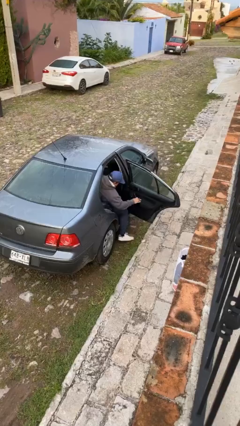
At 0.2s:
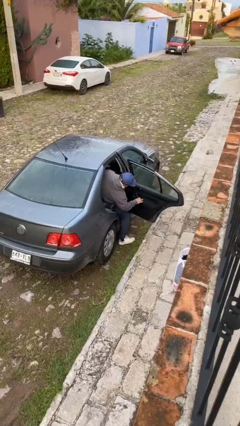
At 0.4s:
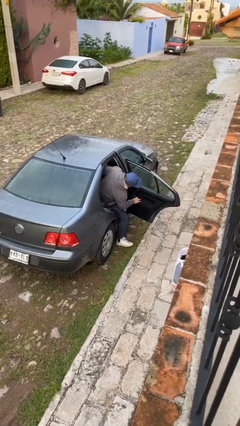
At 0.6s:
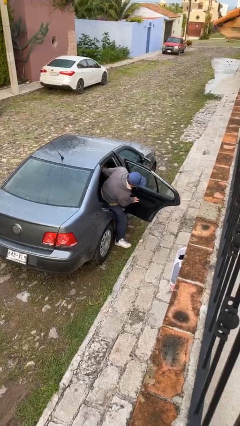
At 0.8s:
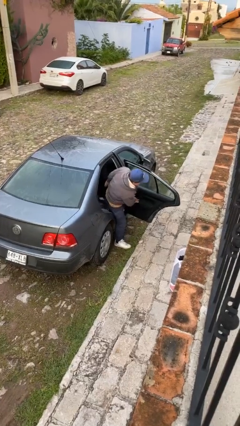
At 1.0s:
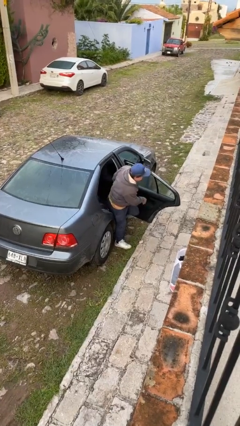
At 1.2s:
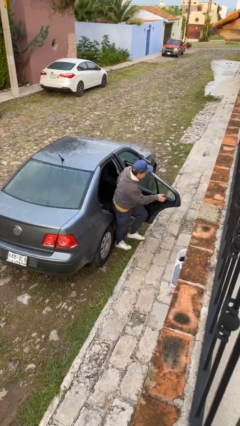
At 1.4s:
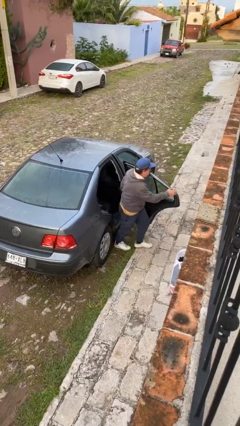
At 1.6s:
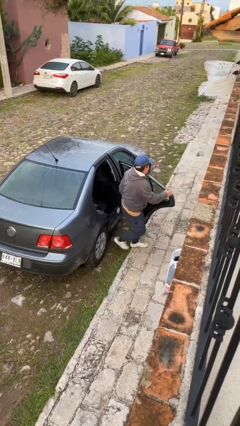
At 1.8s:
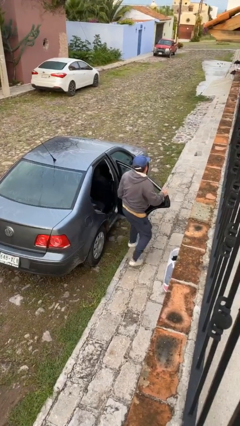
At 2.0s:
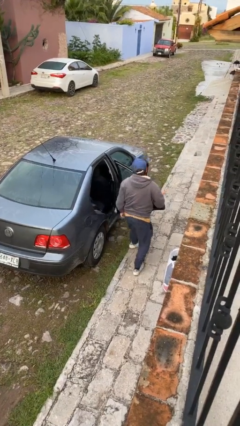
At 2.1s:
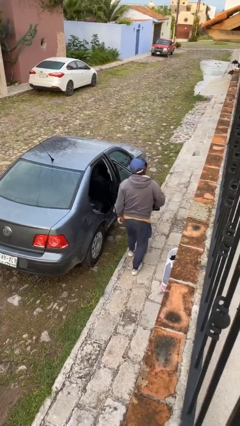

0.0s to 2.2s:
person exits car

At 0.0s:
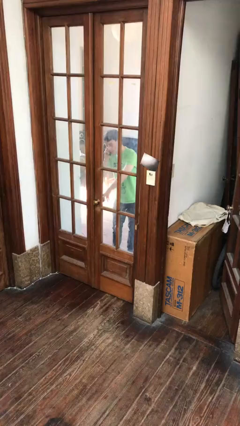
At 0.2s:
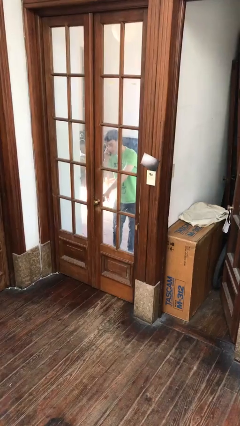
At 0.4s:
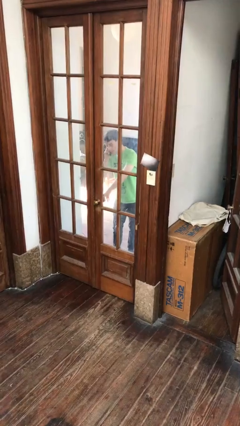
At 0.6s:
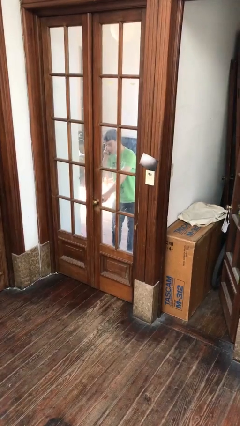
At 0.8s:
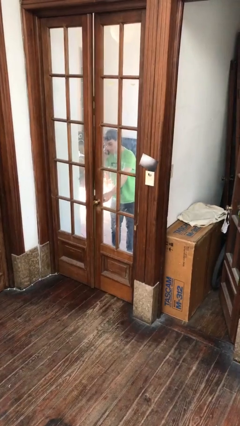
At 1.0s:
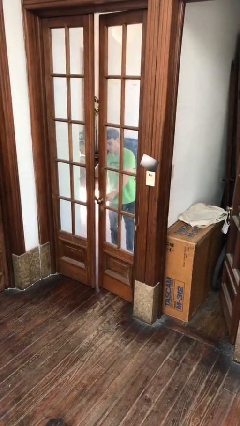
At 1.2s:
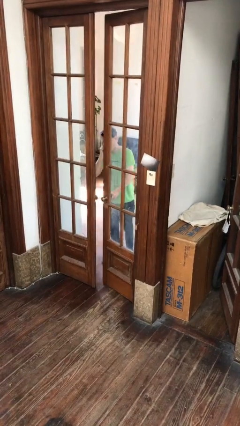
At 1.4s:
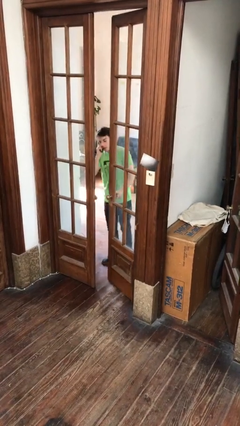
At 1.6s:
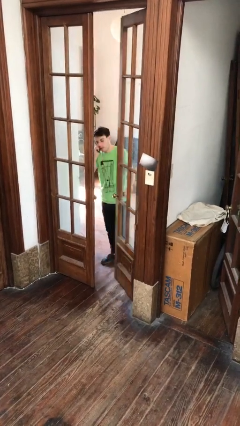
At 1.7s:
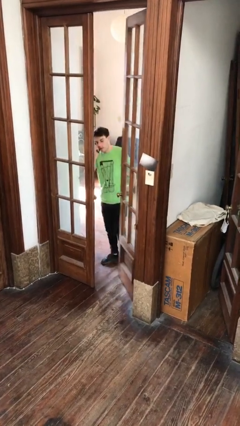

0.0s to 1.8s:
person opens facility door

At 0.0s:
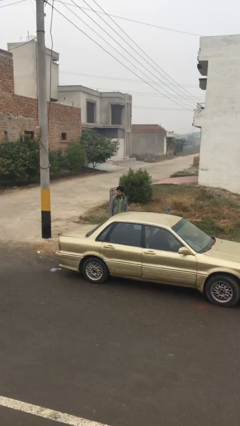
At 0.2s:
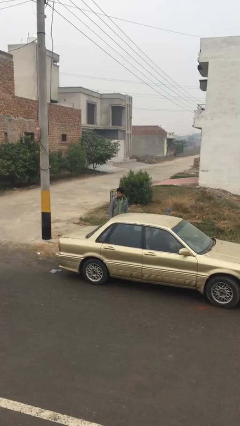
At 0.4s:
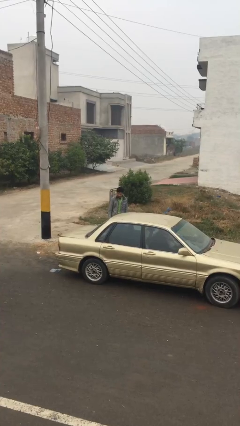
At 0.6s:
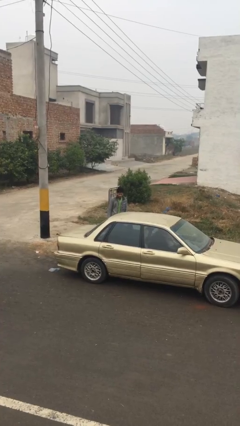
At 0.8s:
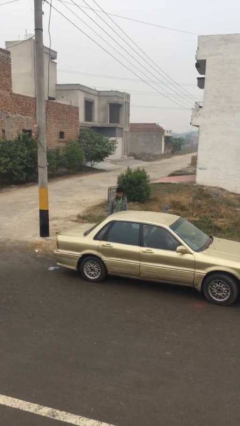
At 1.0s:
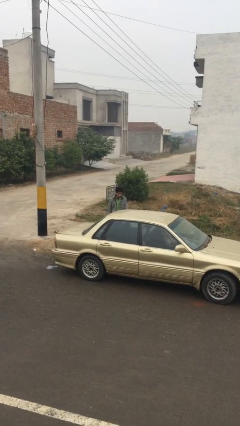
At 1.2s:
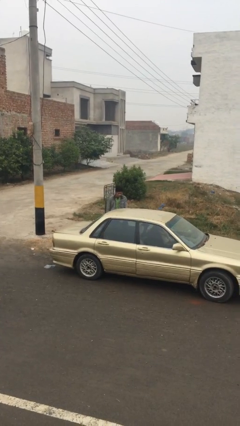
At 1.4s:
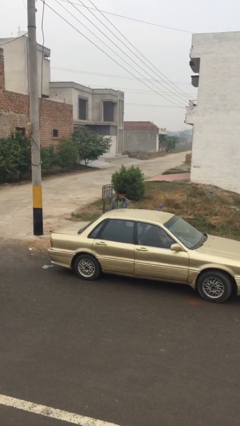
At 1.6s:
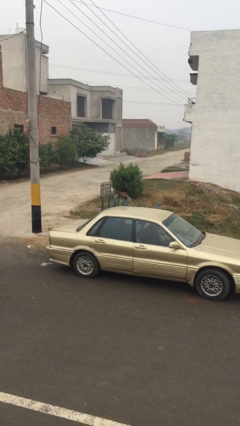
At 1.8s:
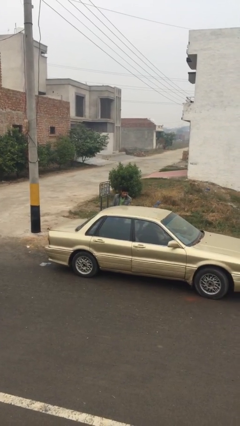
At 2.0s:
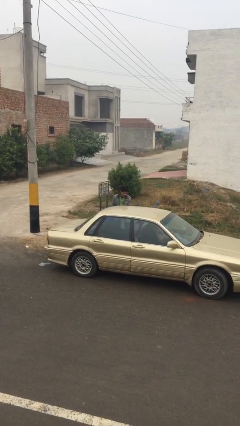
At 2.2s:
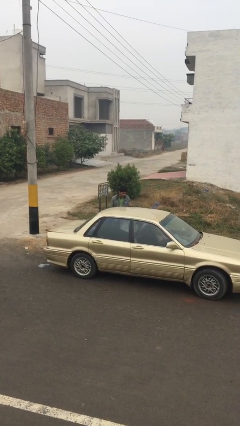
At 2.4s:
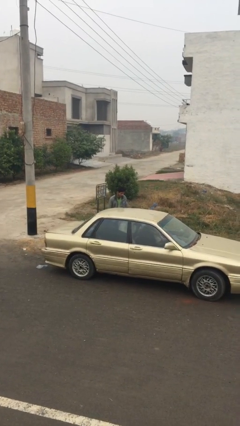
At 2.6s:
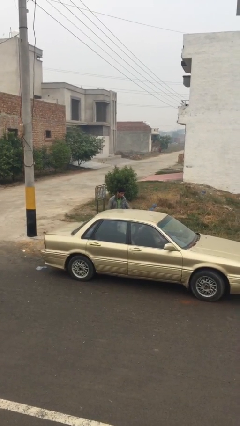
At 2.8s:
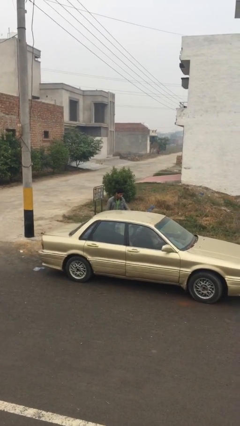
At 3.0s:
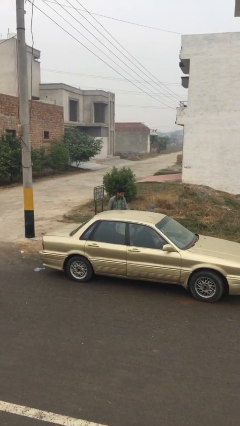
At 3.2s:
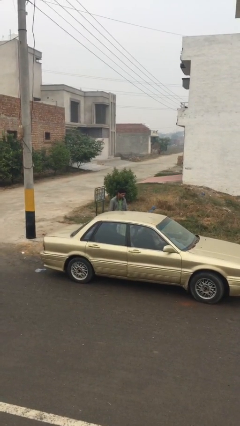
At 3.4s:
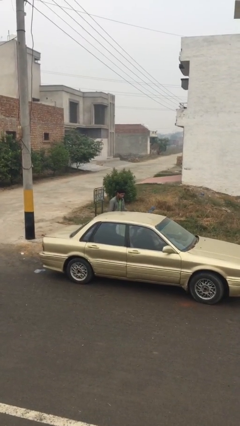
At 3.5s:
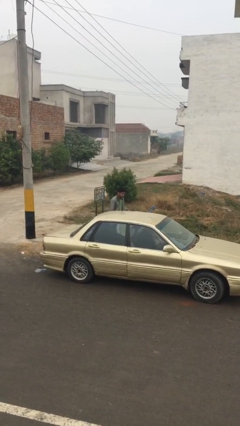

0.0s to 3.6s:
person opens car door

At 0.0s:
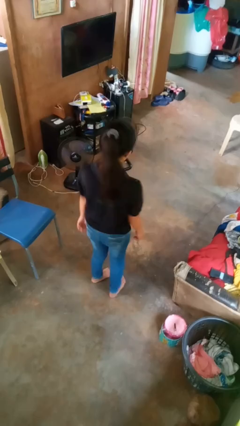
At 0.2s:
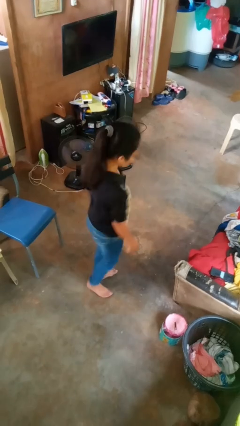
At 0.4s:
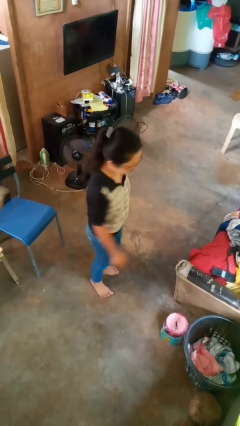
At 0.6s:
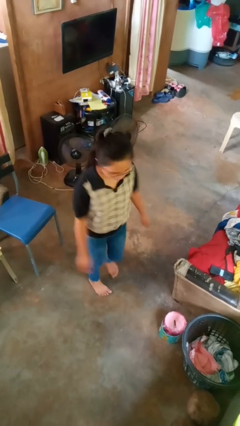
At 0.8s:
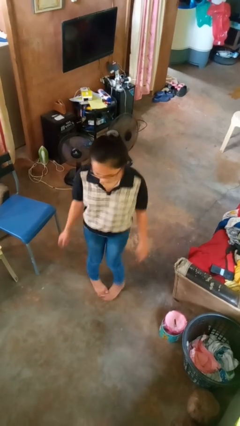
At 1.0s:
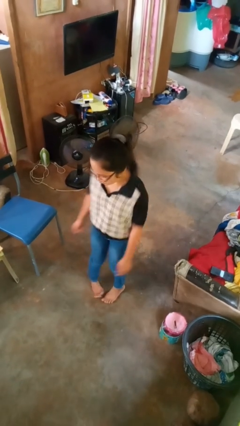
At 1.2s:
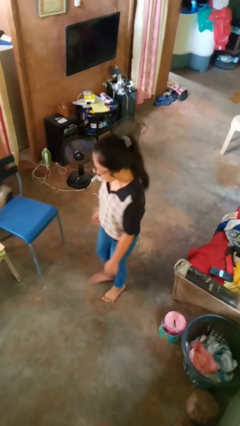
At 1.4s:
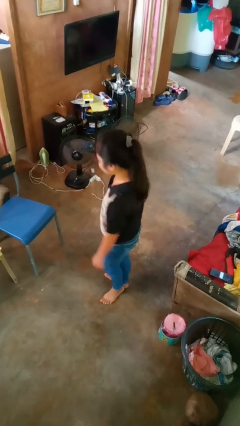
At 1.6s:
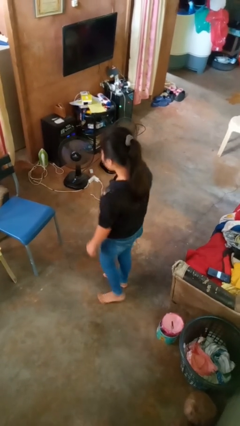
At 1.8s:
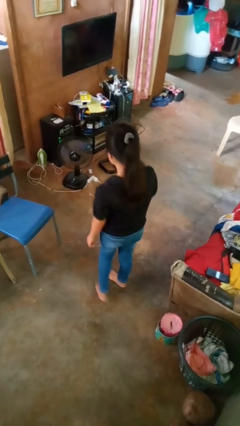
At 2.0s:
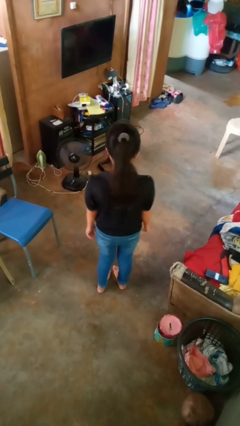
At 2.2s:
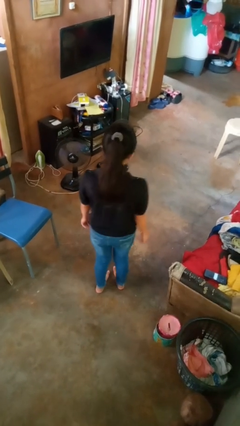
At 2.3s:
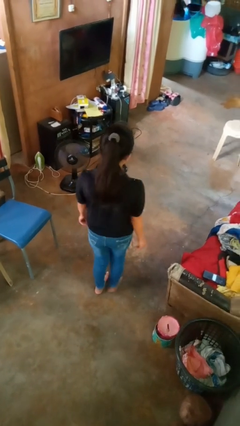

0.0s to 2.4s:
person twirls

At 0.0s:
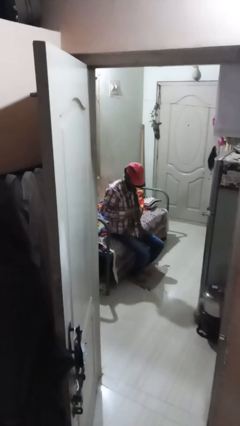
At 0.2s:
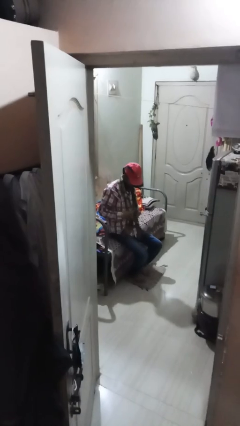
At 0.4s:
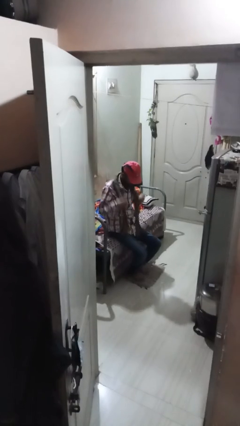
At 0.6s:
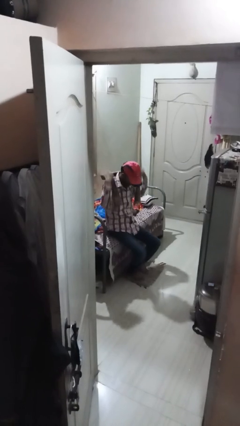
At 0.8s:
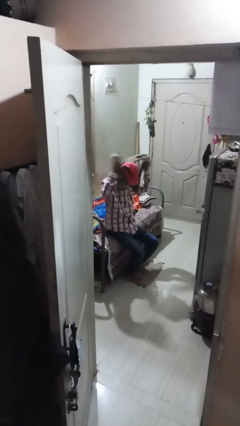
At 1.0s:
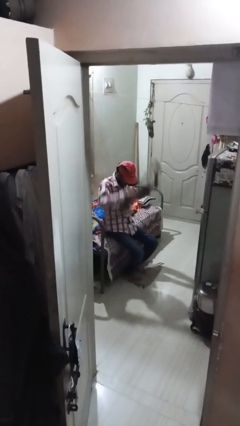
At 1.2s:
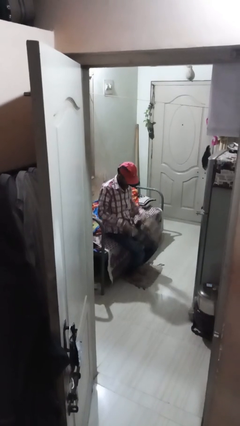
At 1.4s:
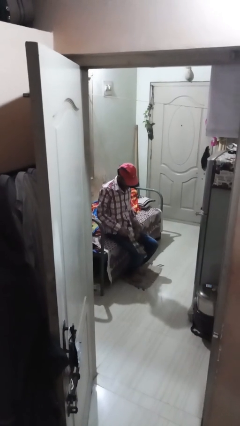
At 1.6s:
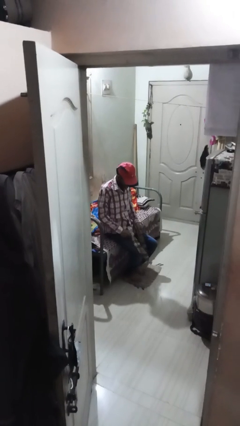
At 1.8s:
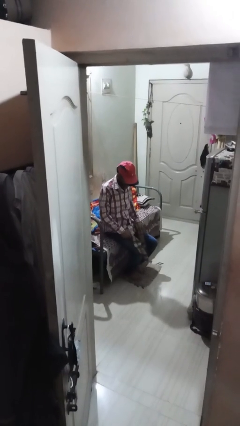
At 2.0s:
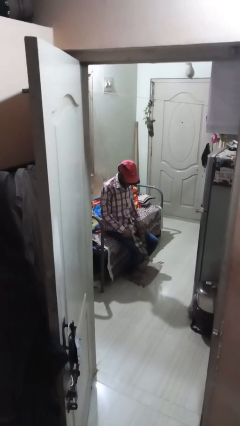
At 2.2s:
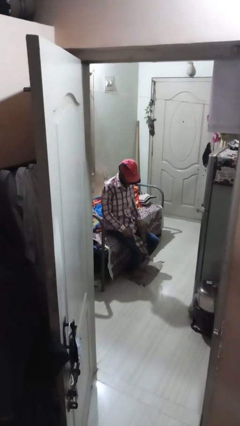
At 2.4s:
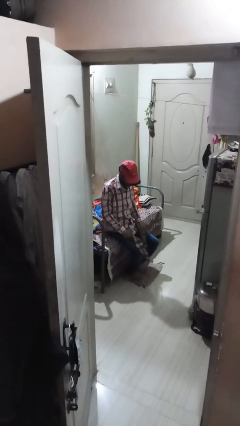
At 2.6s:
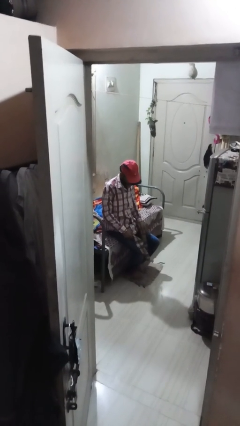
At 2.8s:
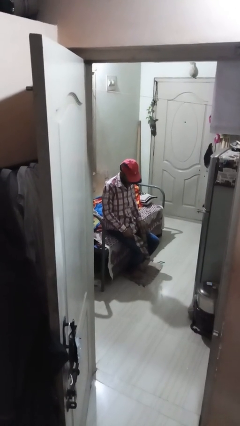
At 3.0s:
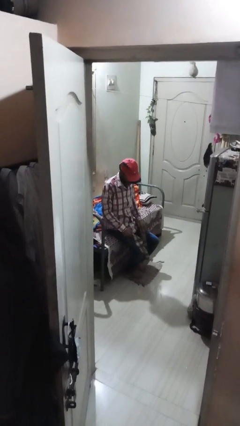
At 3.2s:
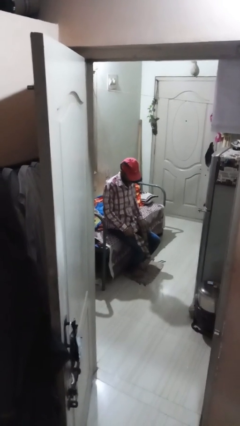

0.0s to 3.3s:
person takes off scarf

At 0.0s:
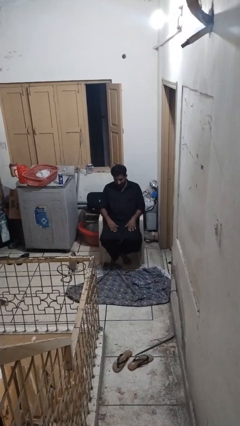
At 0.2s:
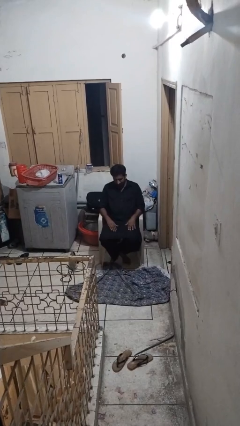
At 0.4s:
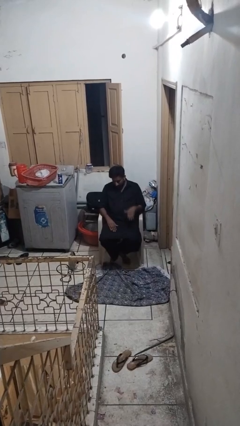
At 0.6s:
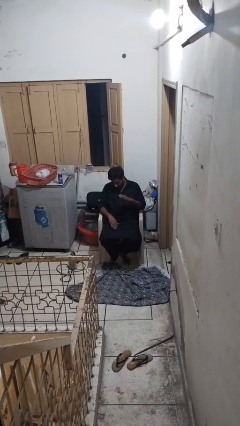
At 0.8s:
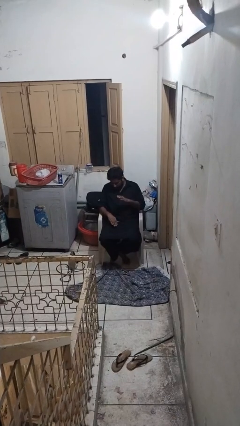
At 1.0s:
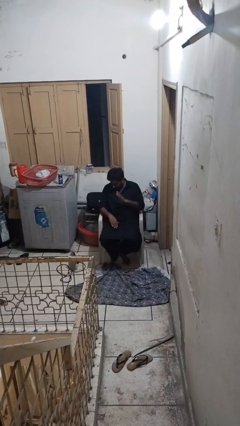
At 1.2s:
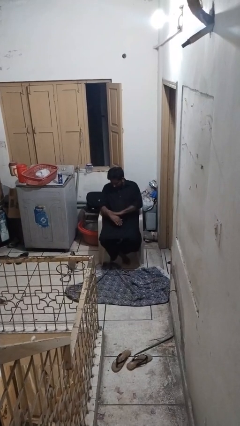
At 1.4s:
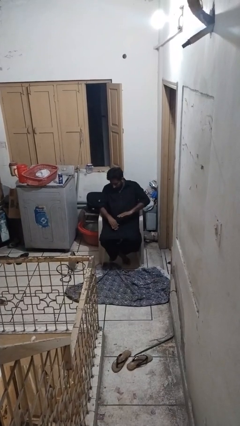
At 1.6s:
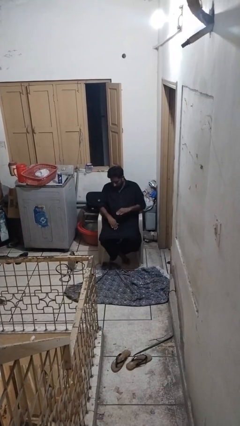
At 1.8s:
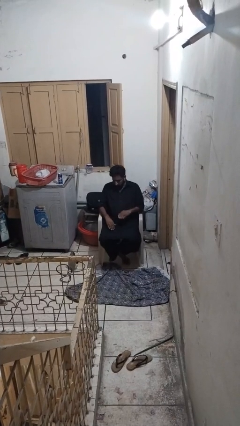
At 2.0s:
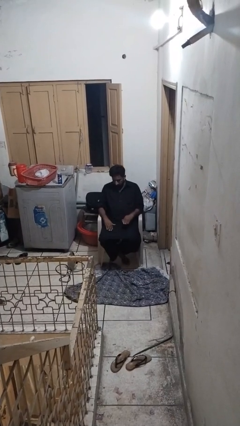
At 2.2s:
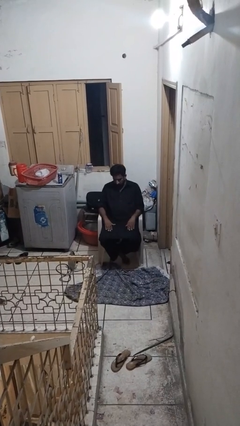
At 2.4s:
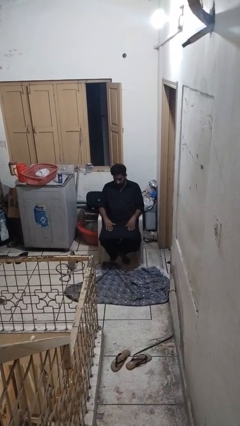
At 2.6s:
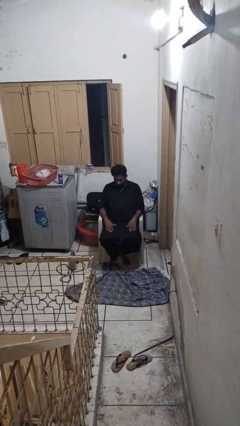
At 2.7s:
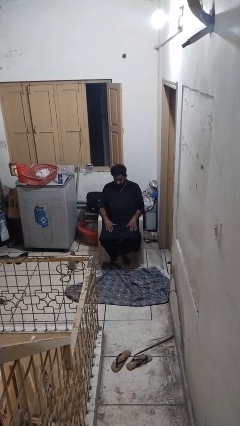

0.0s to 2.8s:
person swats bug

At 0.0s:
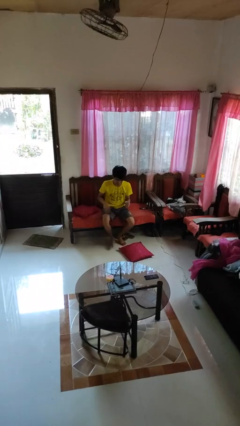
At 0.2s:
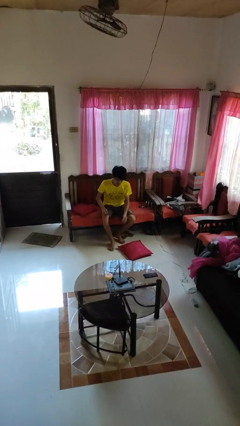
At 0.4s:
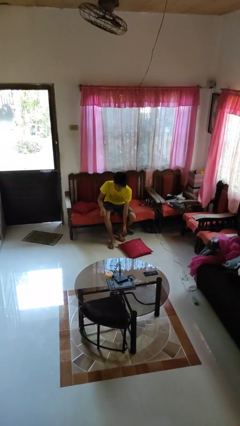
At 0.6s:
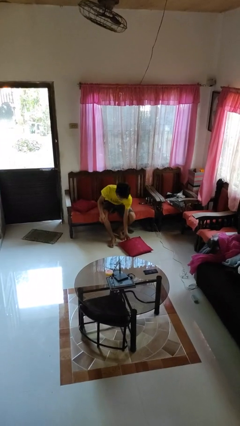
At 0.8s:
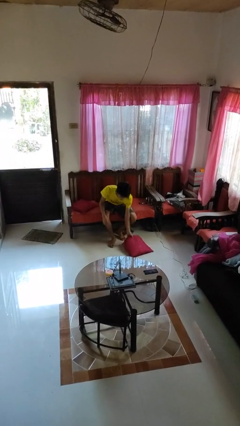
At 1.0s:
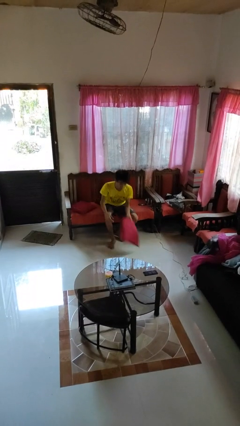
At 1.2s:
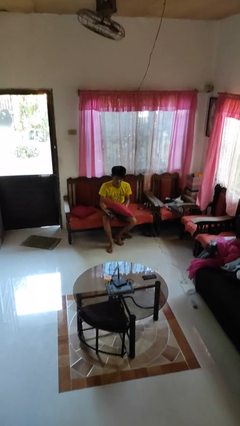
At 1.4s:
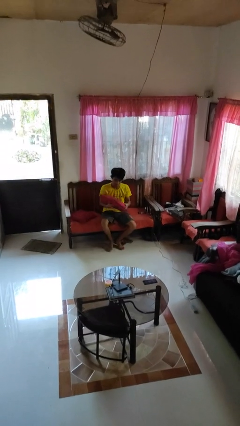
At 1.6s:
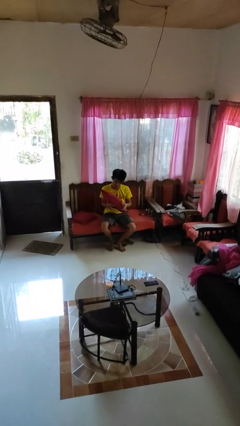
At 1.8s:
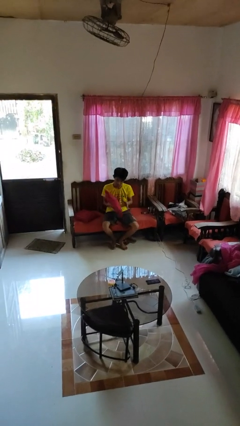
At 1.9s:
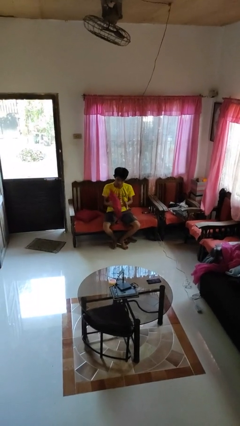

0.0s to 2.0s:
person picks up object from floor
